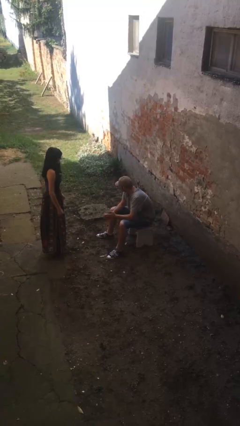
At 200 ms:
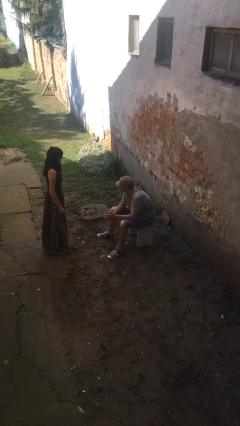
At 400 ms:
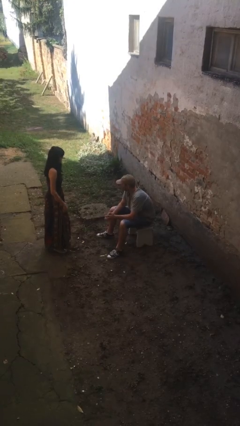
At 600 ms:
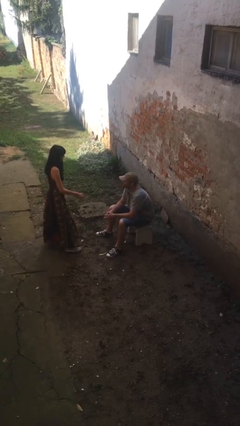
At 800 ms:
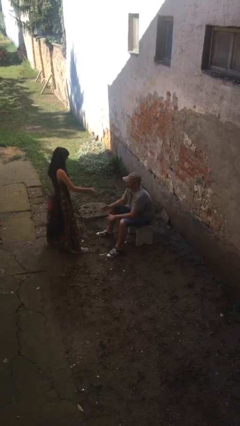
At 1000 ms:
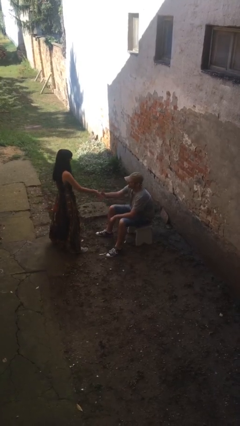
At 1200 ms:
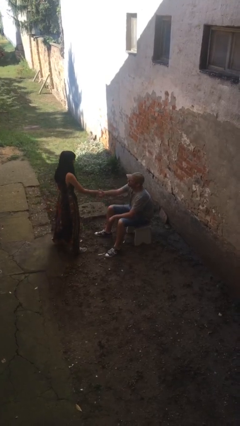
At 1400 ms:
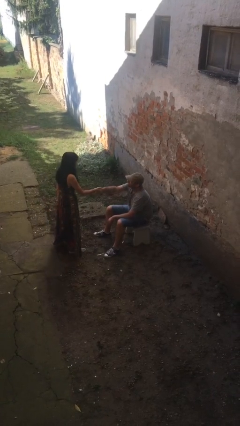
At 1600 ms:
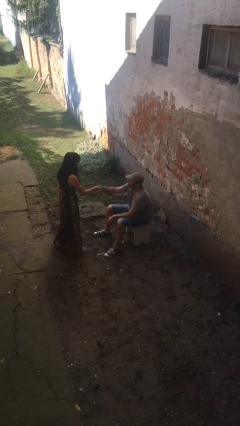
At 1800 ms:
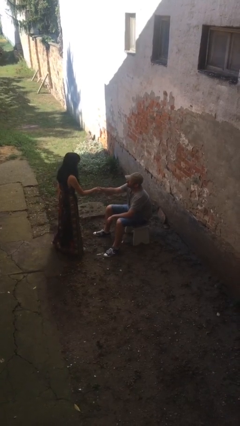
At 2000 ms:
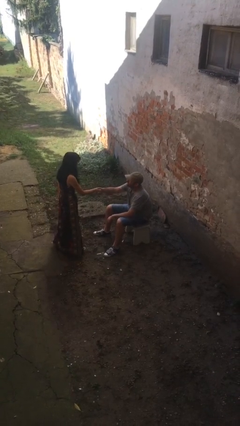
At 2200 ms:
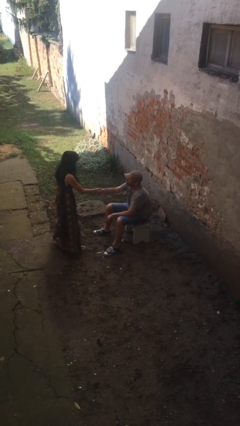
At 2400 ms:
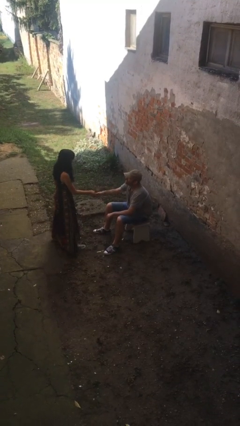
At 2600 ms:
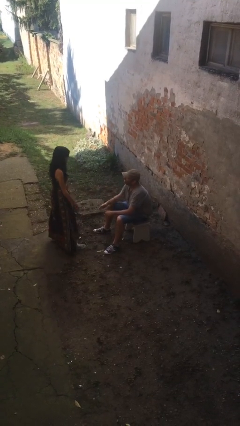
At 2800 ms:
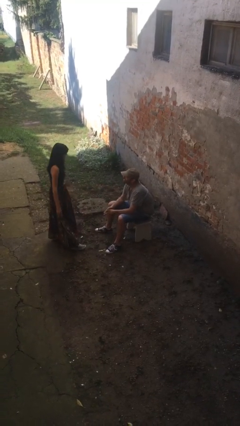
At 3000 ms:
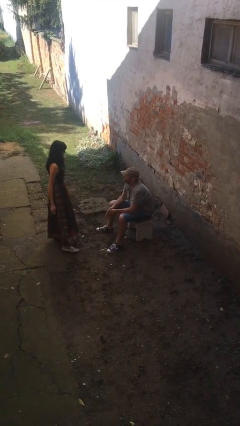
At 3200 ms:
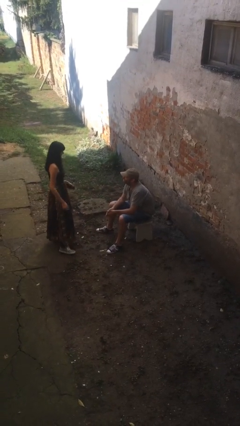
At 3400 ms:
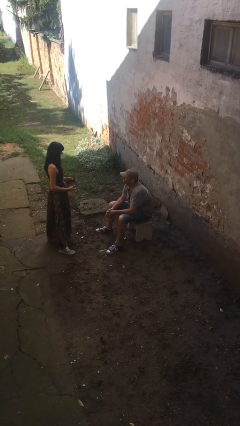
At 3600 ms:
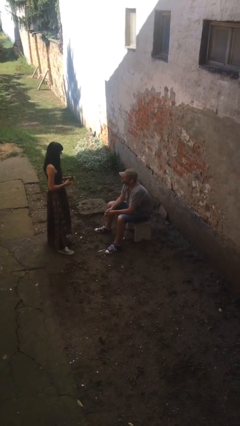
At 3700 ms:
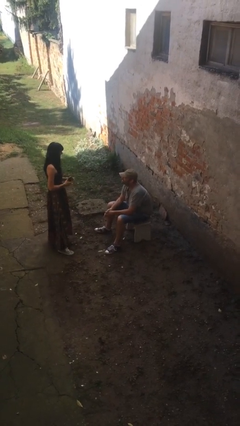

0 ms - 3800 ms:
person shakes hand

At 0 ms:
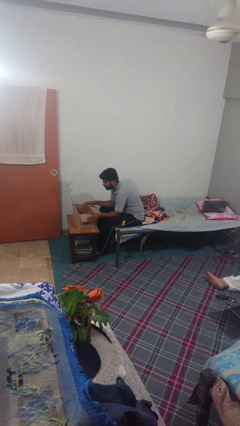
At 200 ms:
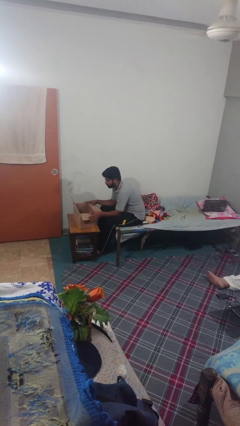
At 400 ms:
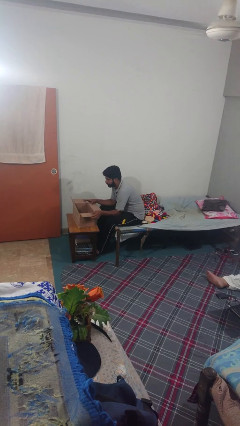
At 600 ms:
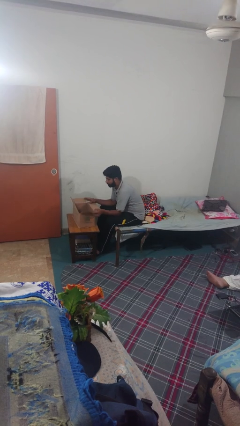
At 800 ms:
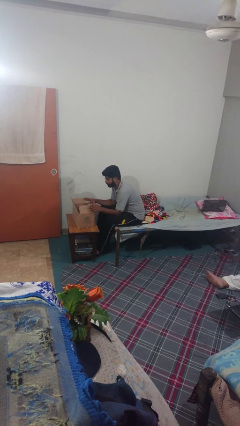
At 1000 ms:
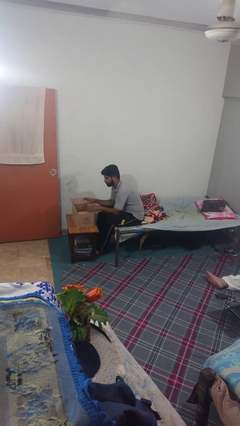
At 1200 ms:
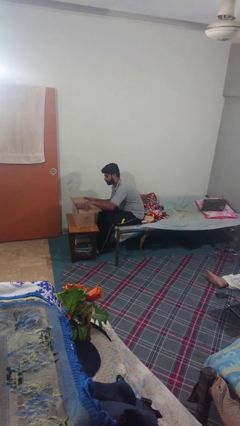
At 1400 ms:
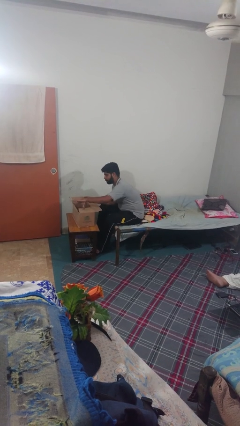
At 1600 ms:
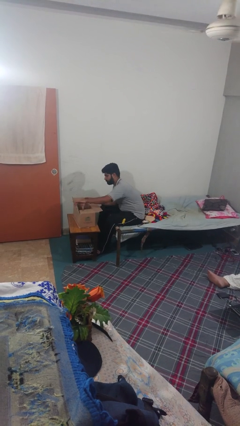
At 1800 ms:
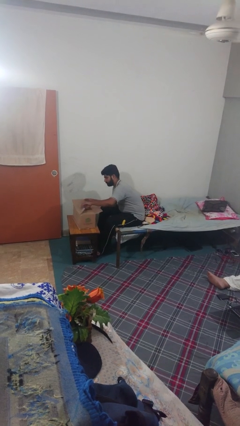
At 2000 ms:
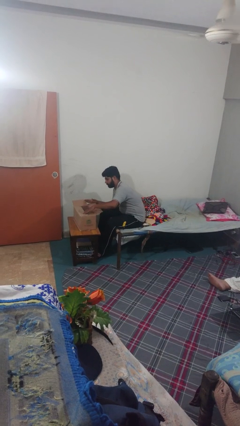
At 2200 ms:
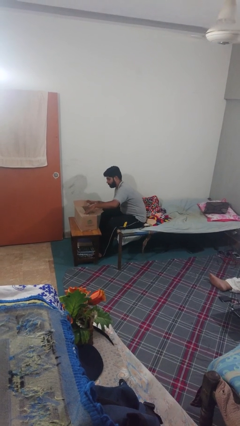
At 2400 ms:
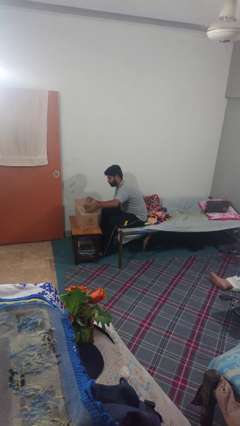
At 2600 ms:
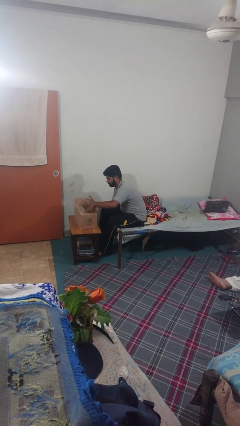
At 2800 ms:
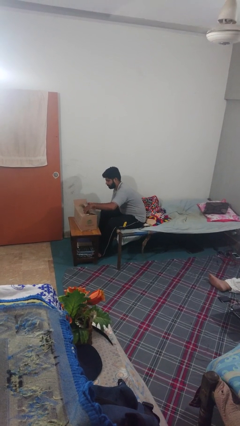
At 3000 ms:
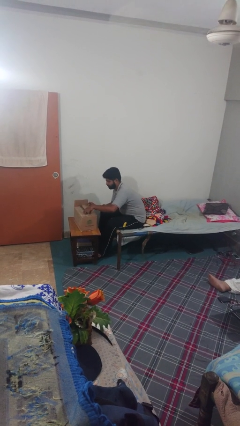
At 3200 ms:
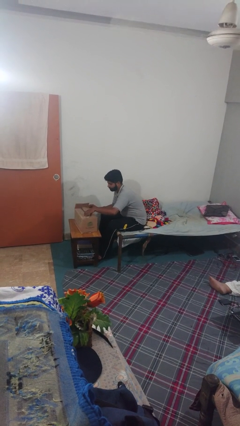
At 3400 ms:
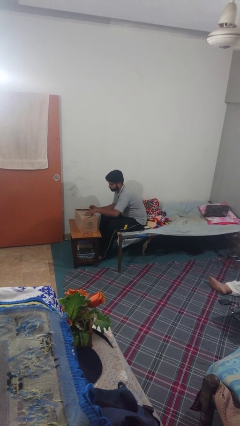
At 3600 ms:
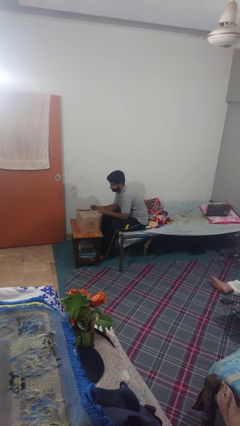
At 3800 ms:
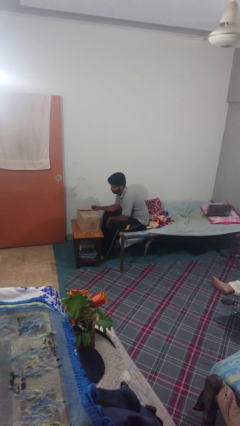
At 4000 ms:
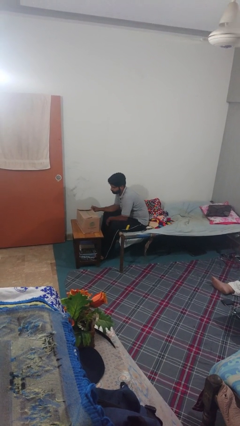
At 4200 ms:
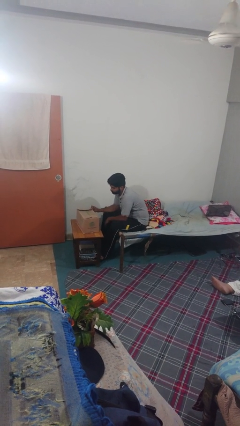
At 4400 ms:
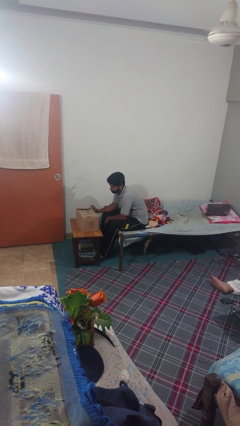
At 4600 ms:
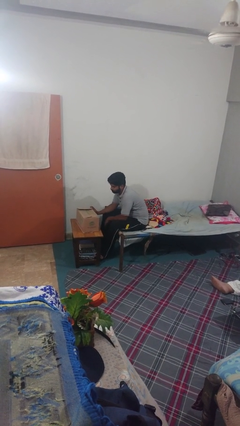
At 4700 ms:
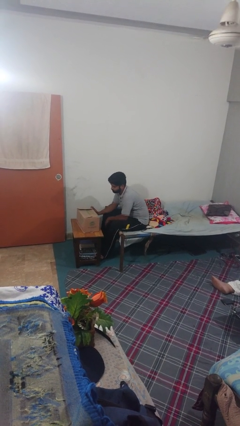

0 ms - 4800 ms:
person closes box

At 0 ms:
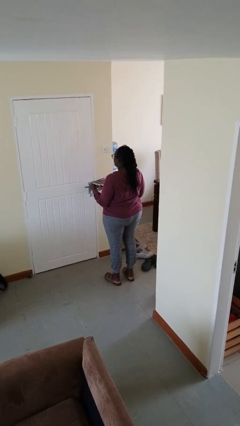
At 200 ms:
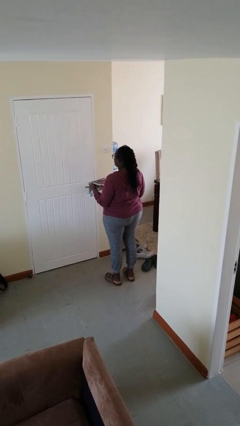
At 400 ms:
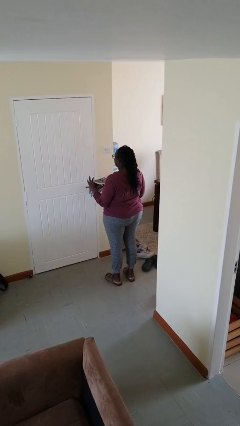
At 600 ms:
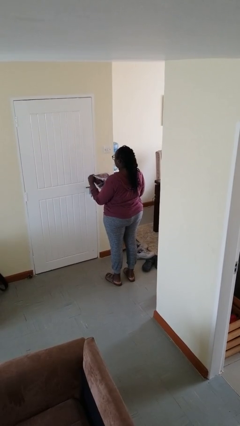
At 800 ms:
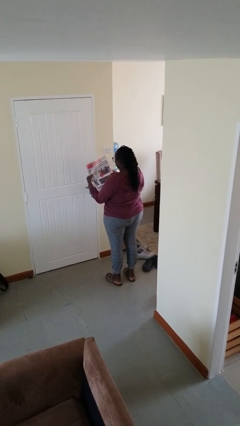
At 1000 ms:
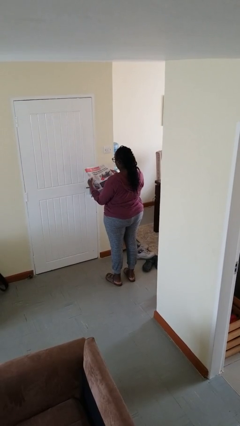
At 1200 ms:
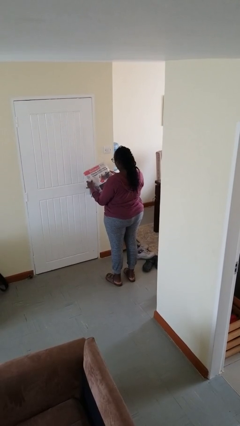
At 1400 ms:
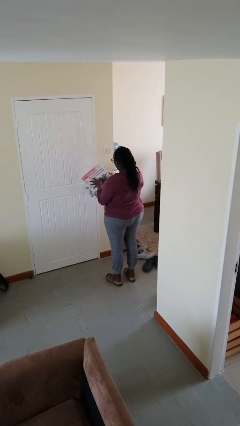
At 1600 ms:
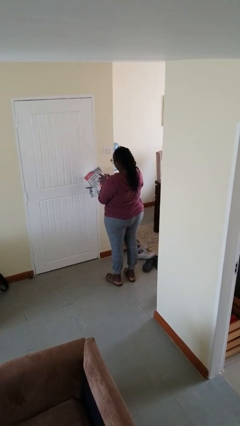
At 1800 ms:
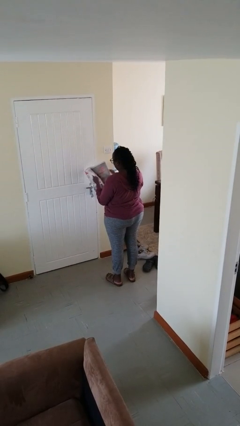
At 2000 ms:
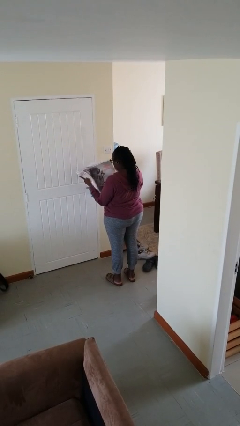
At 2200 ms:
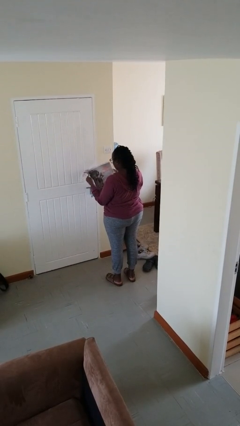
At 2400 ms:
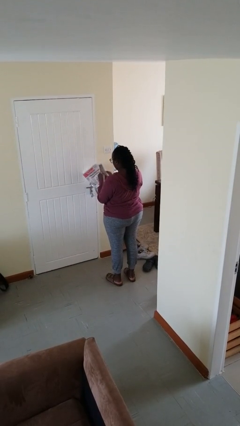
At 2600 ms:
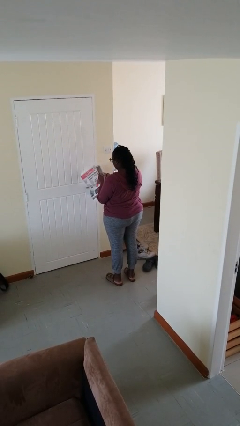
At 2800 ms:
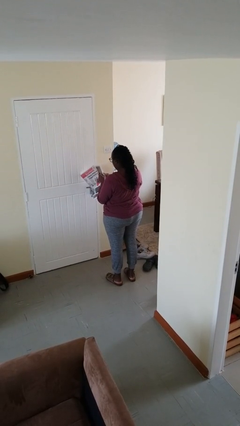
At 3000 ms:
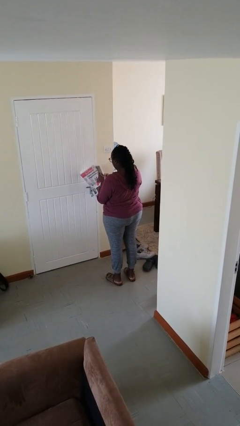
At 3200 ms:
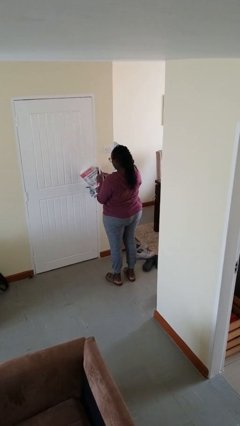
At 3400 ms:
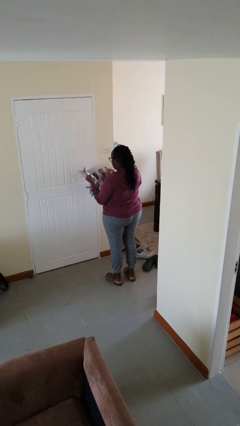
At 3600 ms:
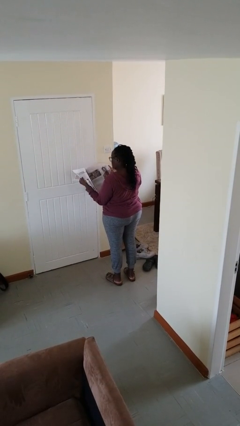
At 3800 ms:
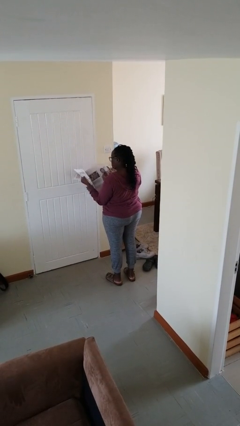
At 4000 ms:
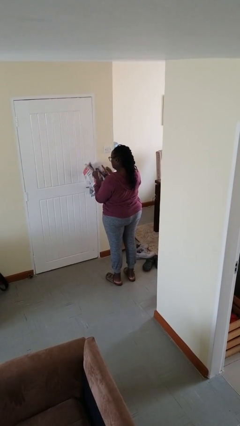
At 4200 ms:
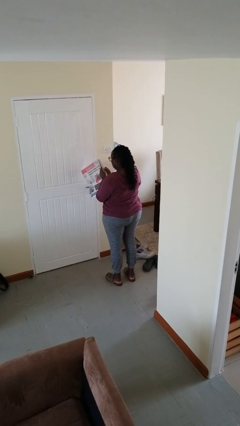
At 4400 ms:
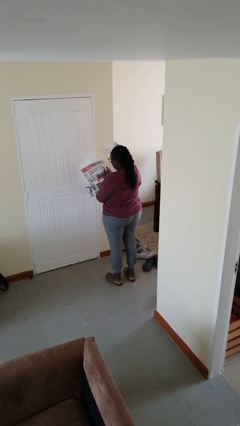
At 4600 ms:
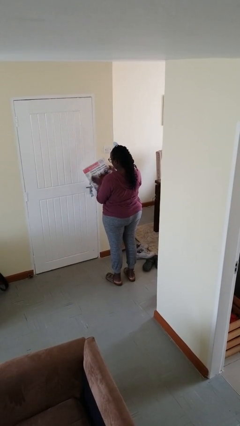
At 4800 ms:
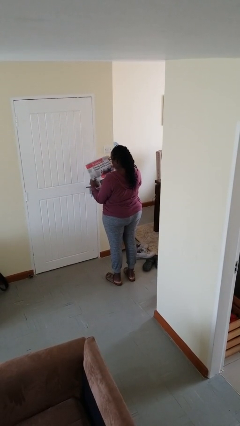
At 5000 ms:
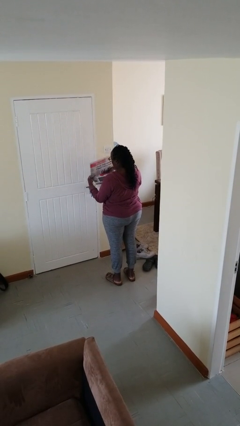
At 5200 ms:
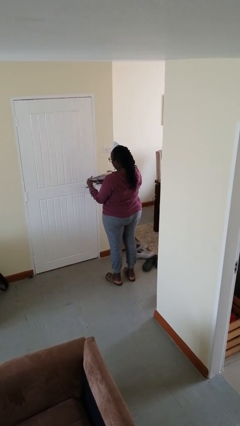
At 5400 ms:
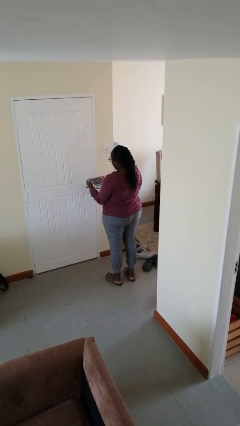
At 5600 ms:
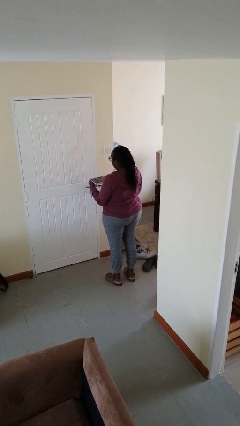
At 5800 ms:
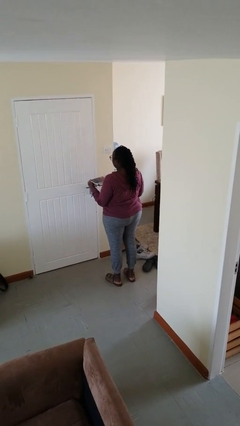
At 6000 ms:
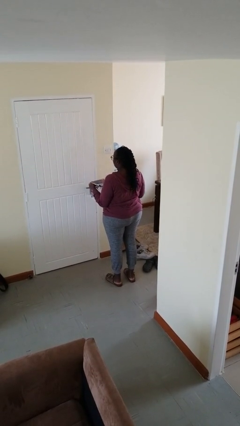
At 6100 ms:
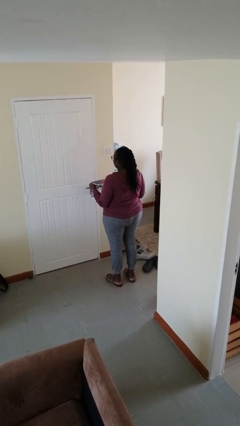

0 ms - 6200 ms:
person reads newspaper

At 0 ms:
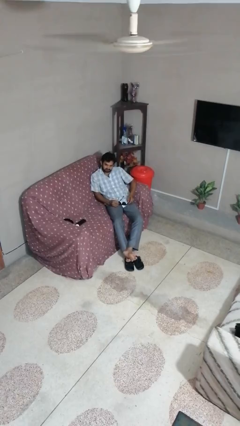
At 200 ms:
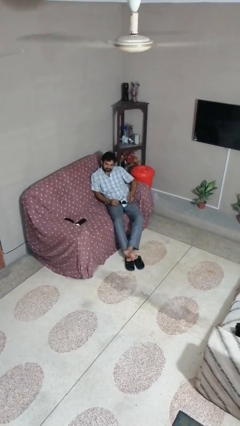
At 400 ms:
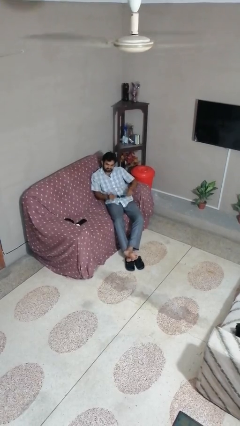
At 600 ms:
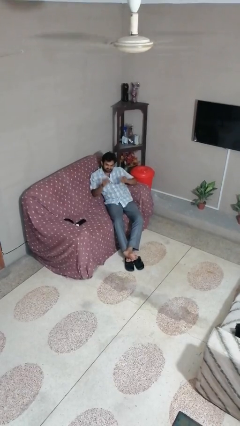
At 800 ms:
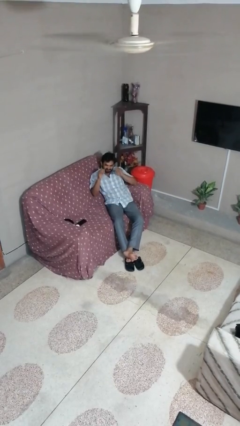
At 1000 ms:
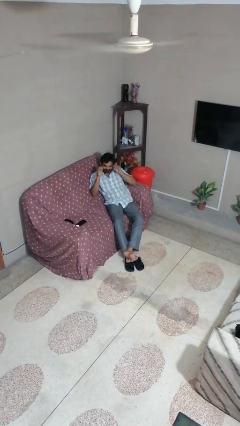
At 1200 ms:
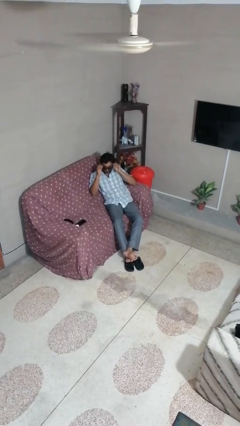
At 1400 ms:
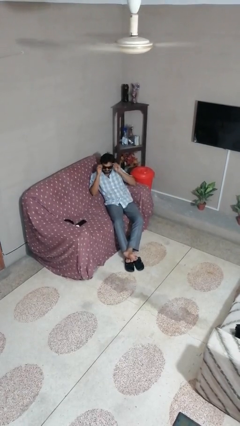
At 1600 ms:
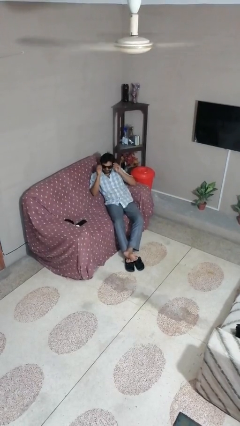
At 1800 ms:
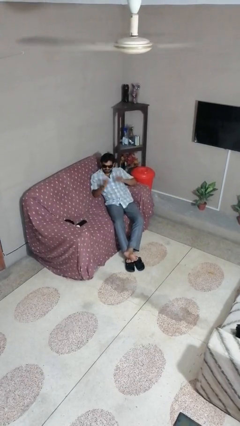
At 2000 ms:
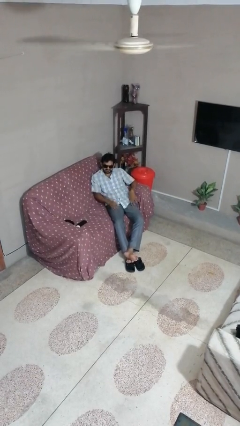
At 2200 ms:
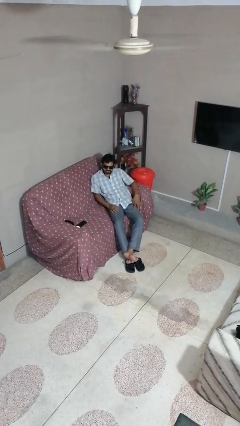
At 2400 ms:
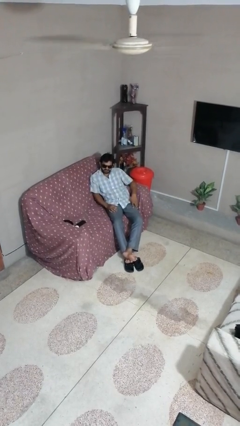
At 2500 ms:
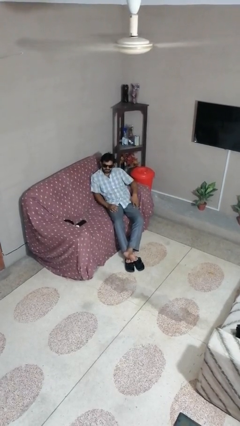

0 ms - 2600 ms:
person puts on sunglasses

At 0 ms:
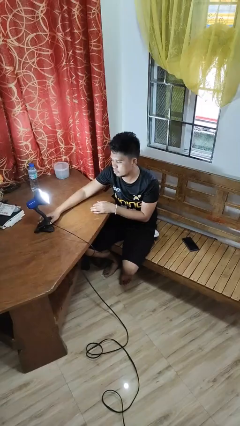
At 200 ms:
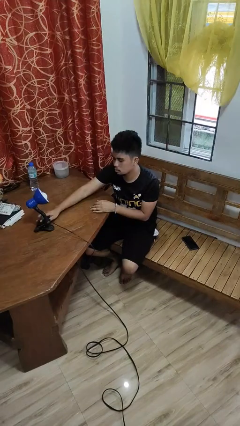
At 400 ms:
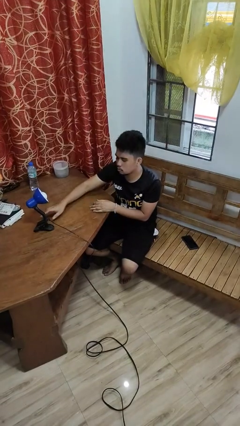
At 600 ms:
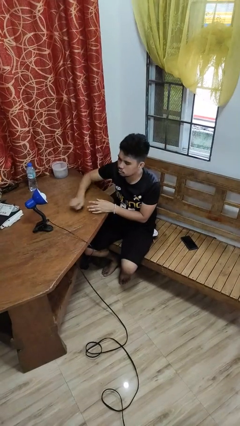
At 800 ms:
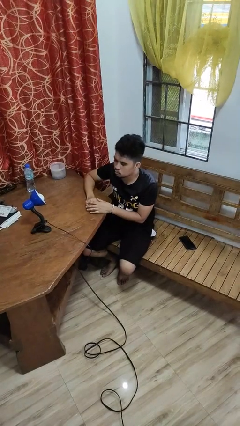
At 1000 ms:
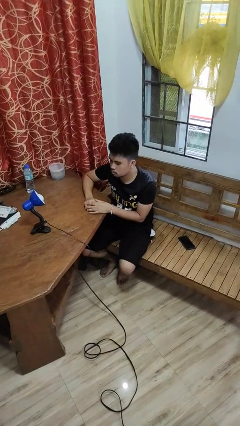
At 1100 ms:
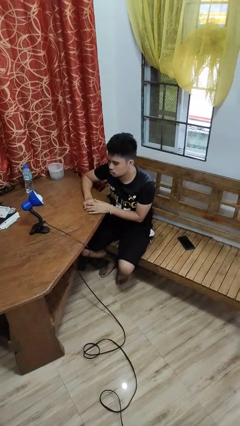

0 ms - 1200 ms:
person turns off lamp
